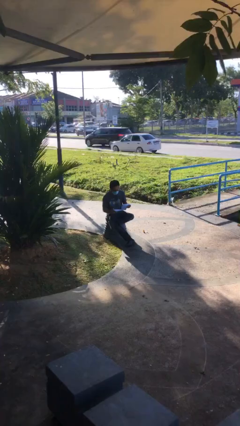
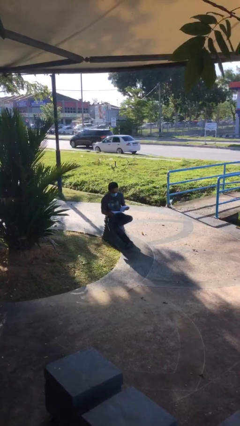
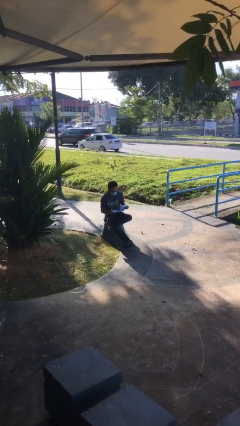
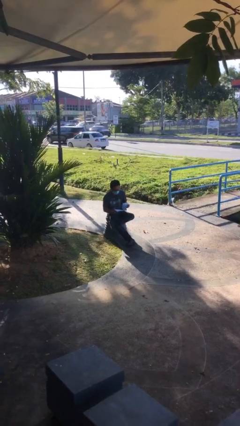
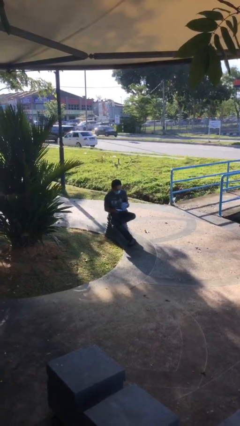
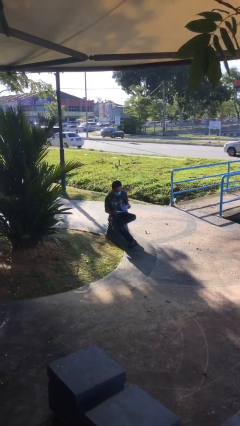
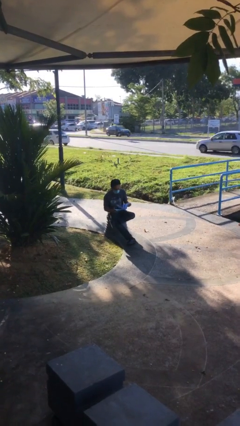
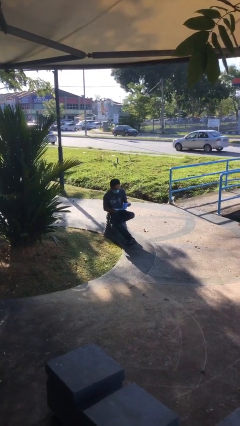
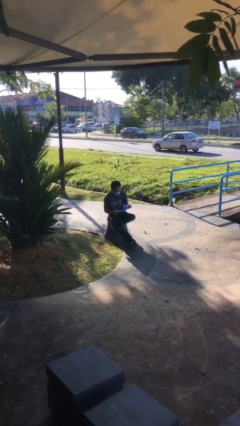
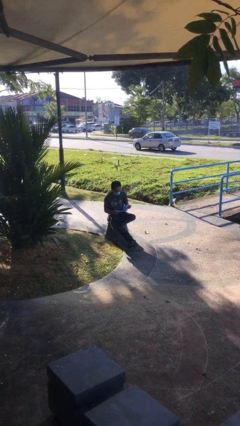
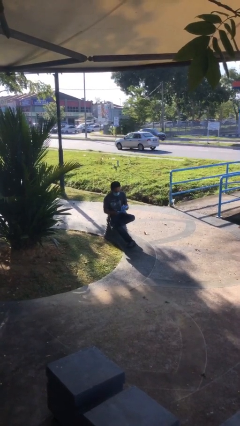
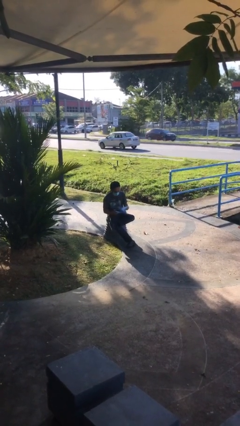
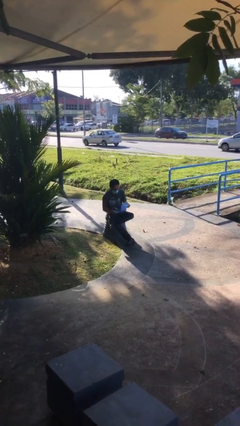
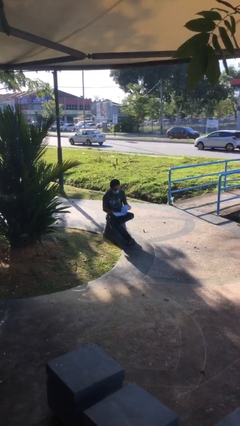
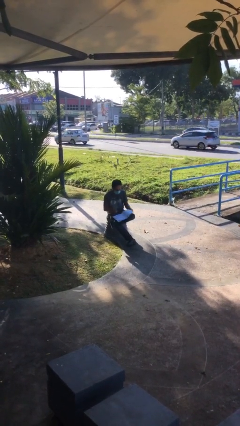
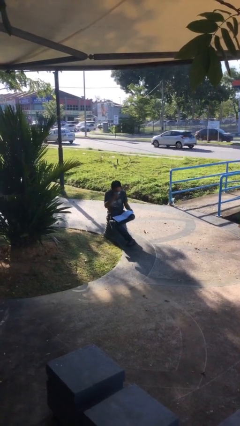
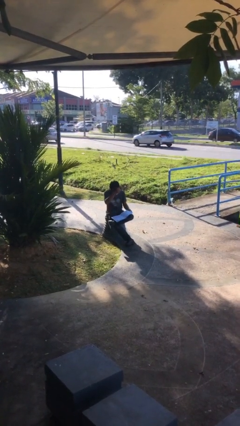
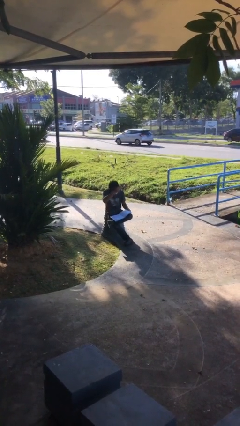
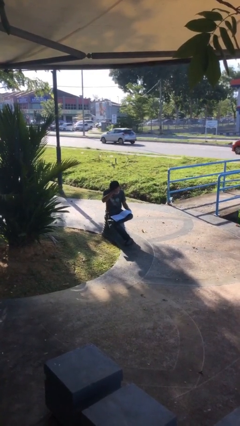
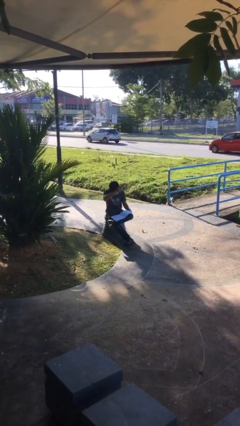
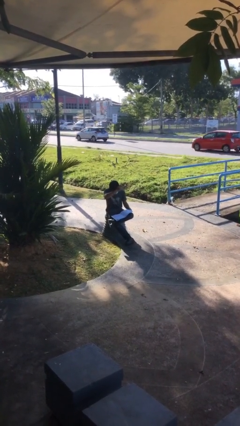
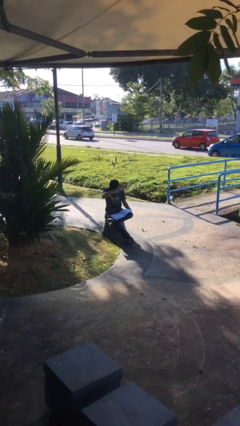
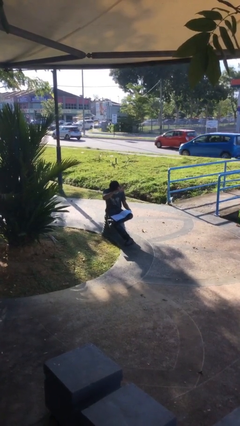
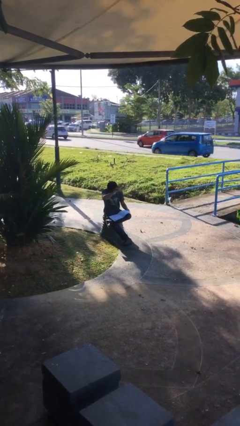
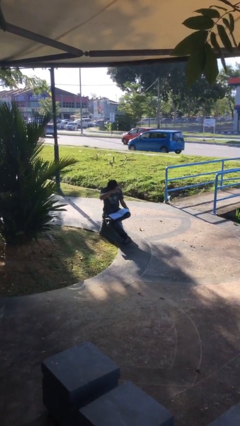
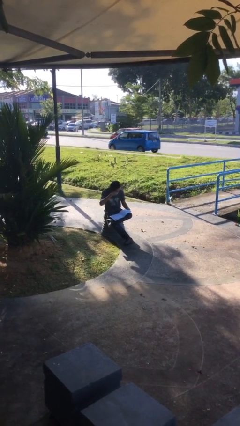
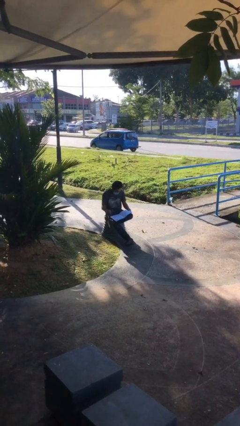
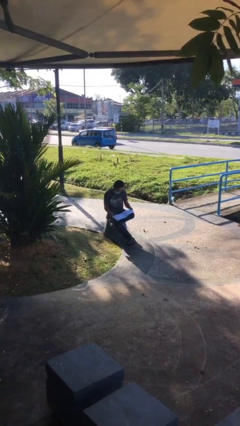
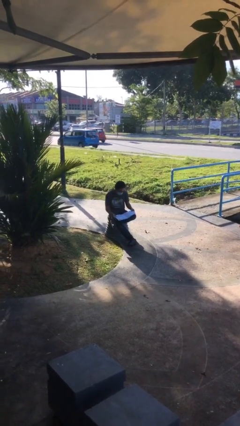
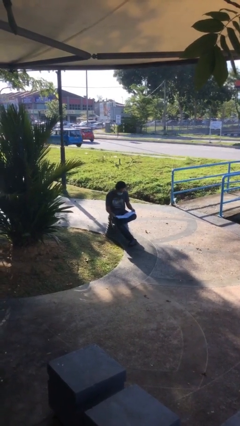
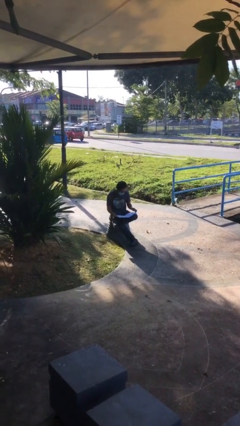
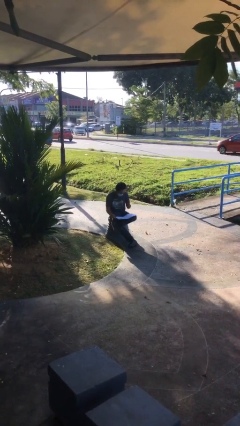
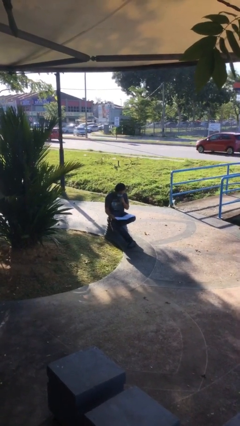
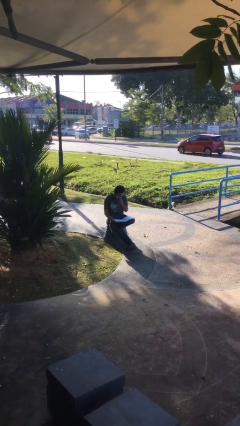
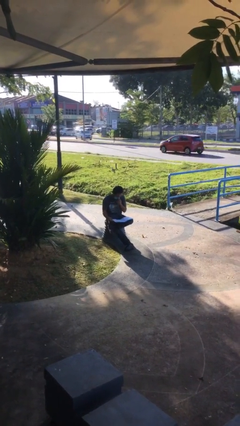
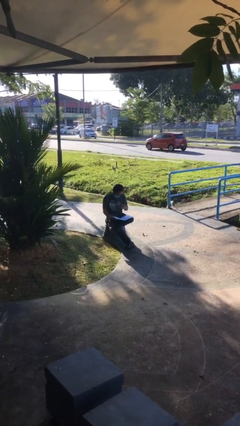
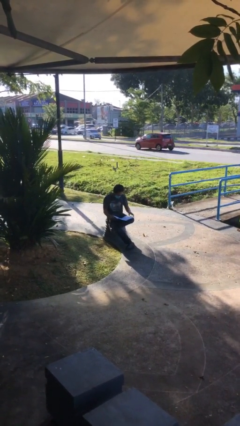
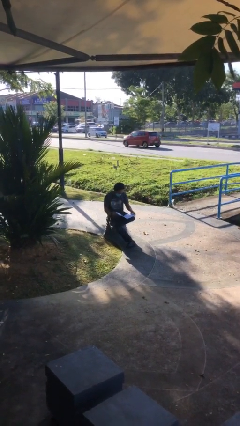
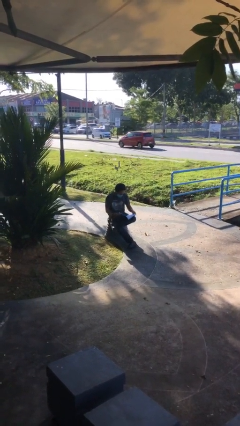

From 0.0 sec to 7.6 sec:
person reads document

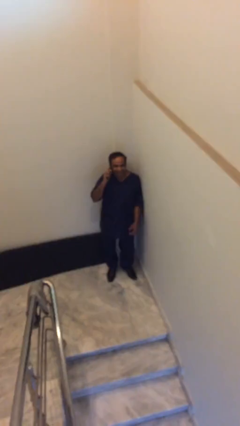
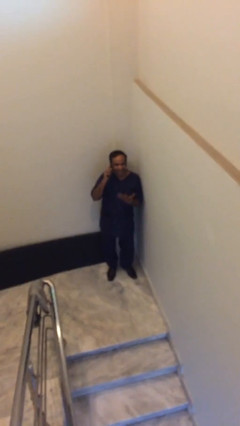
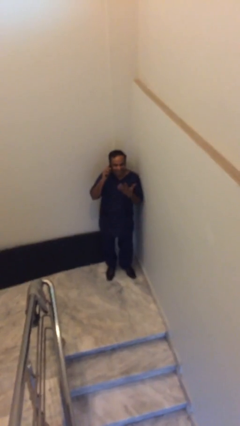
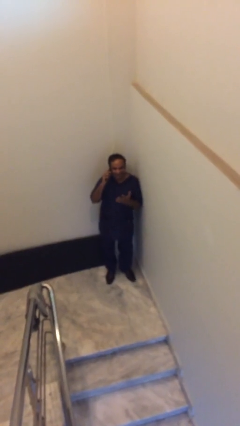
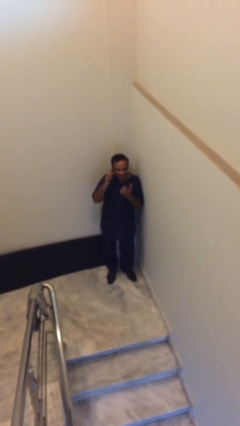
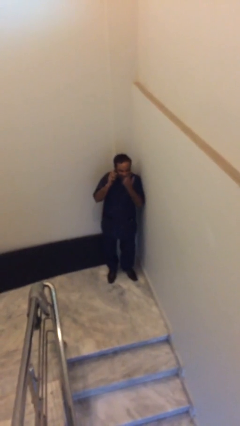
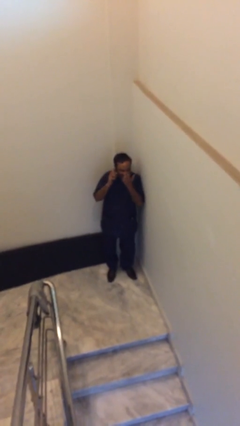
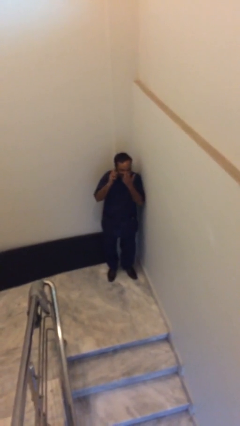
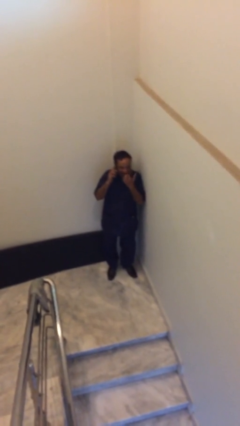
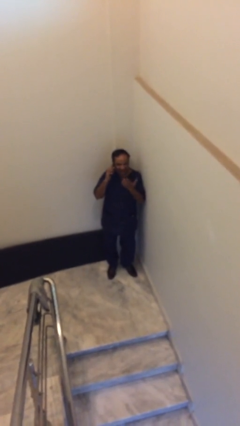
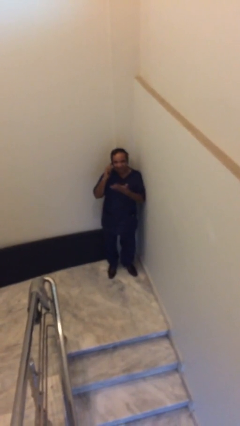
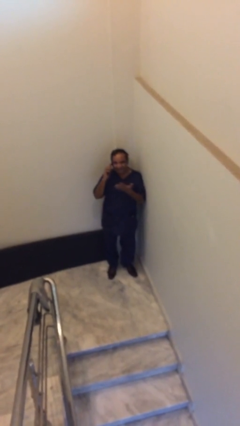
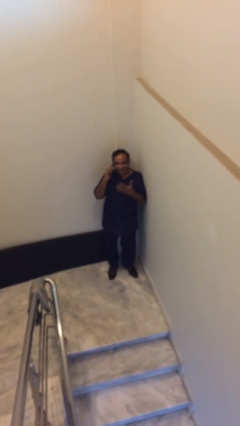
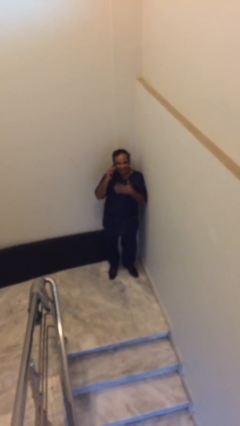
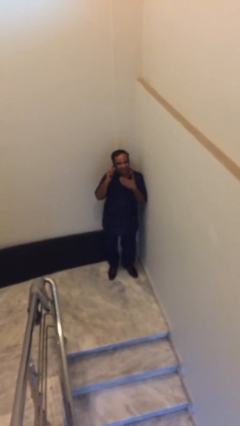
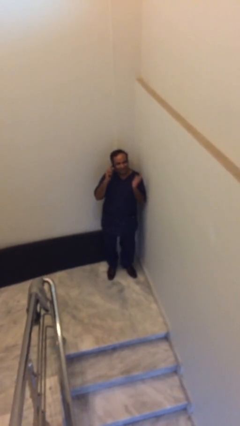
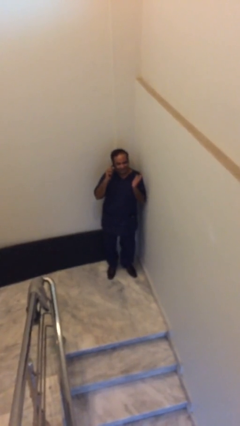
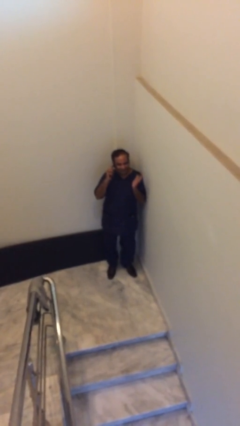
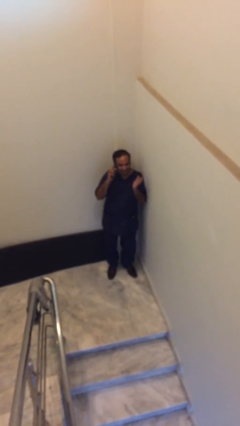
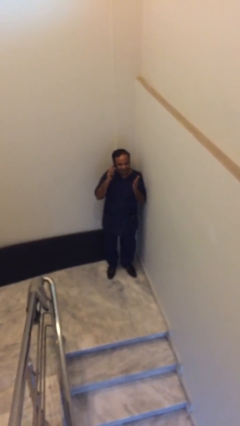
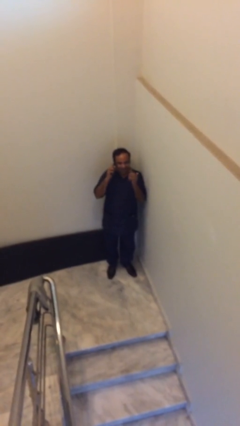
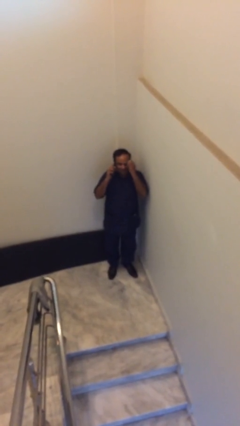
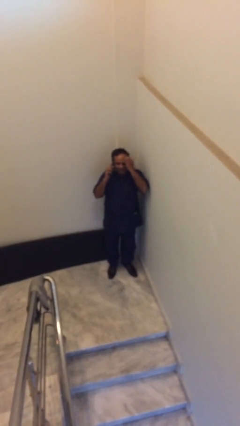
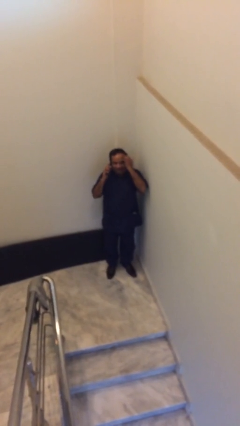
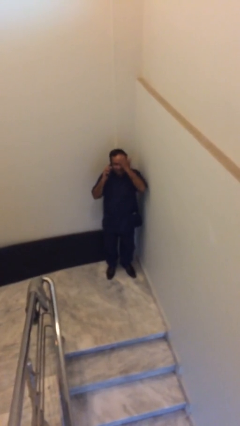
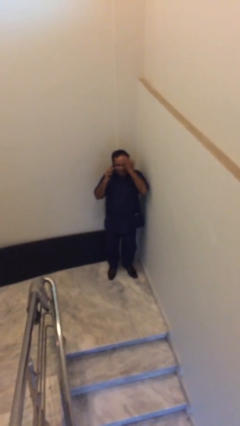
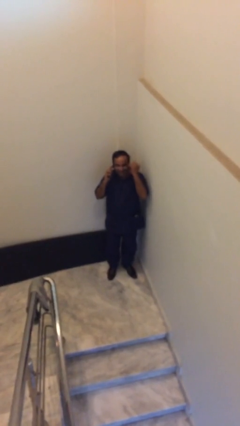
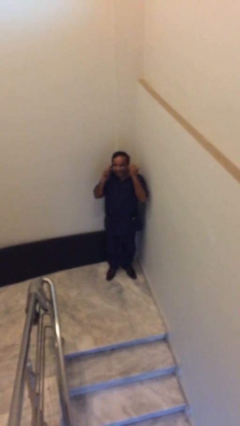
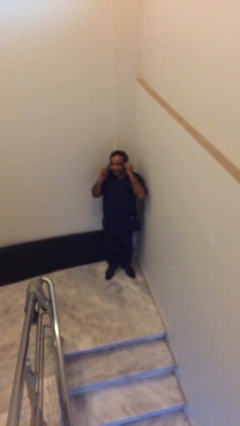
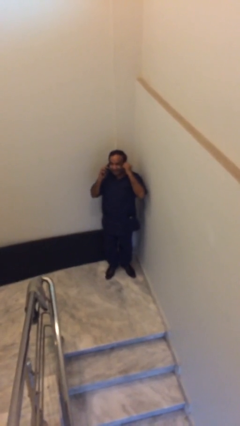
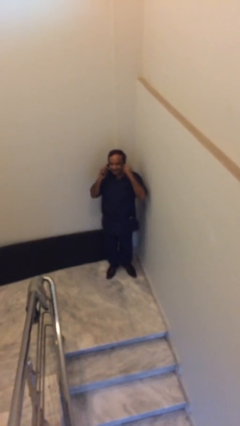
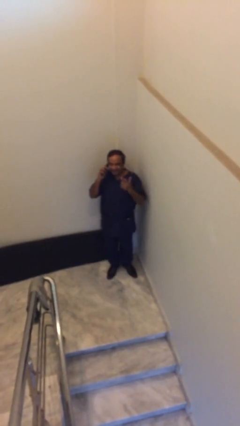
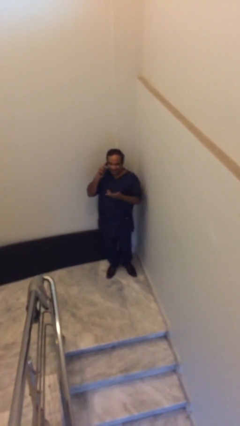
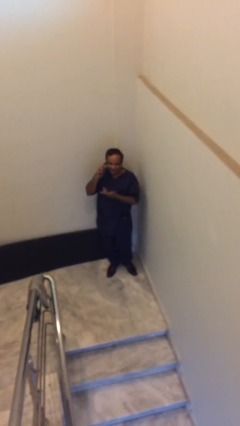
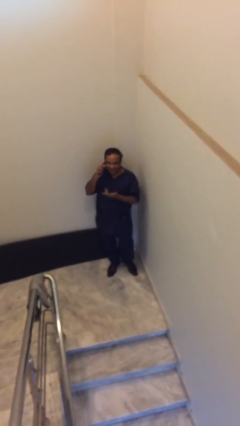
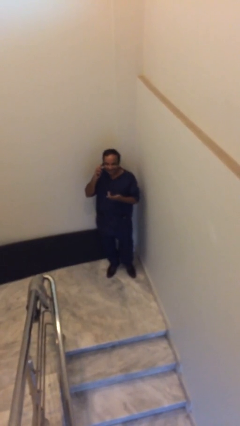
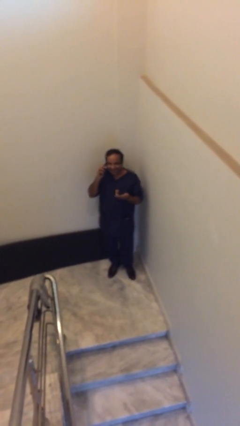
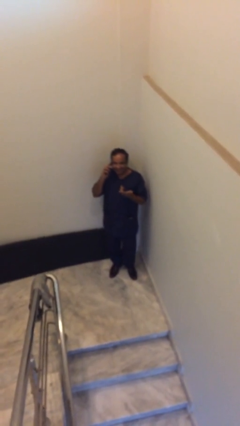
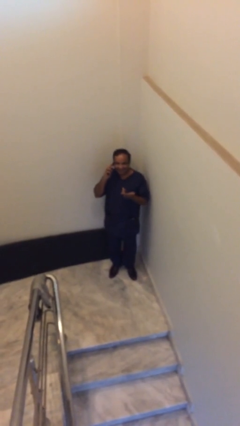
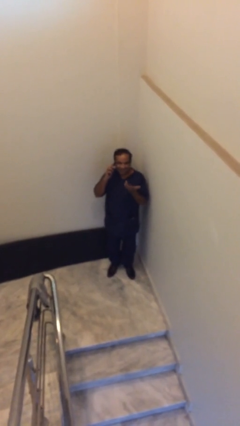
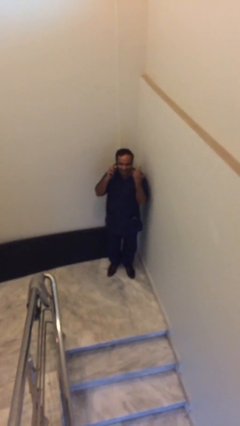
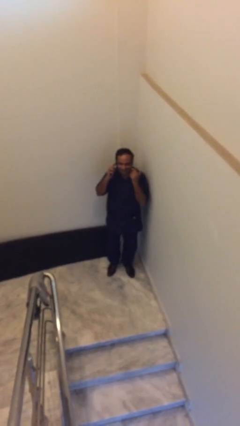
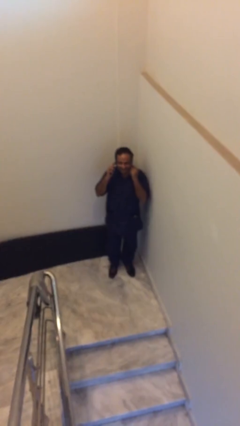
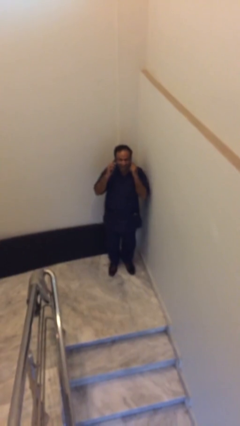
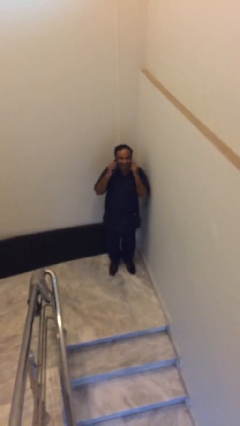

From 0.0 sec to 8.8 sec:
person talks on phone

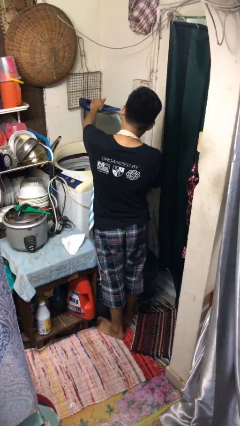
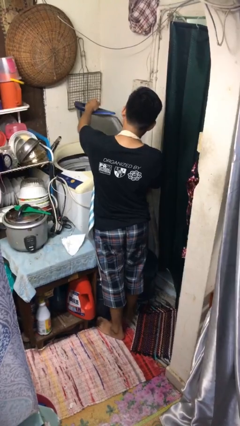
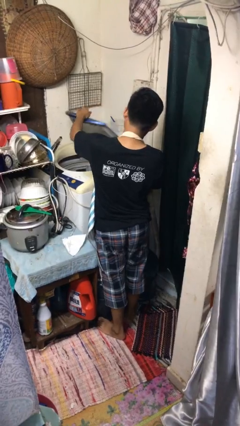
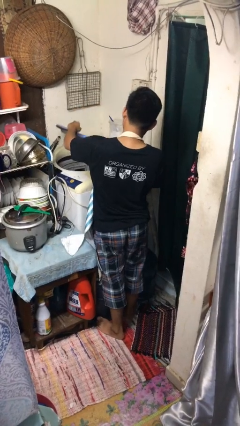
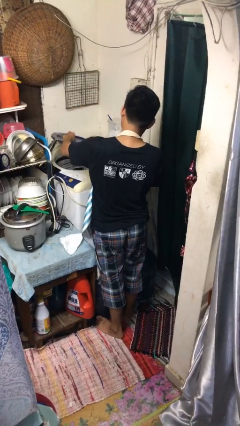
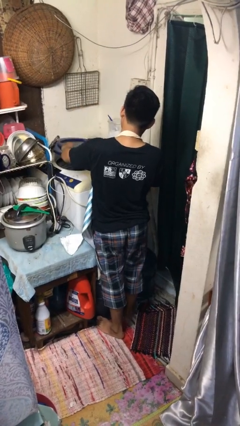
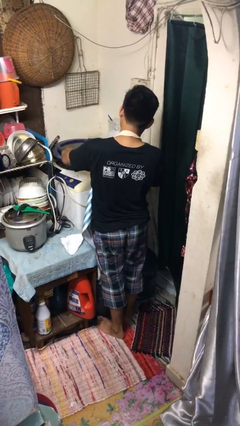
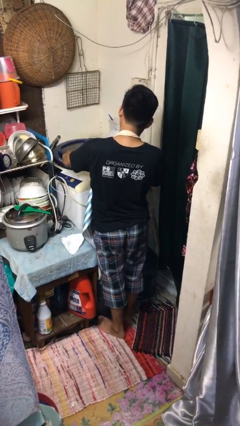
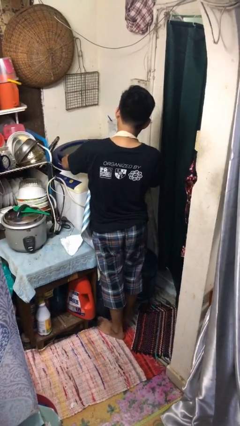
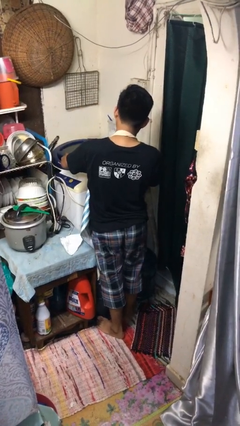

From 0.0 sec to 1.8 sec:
person closes clothes washer
